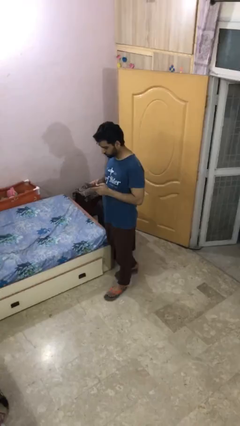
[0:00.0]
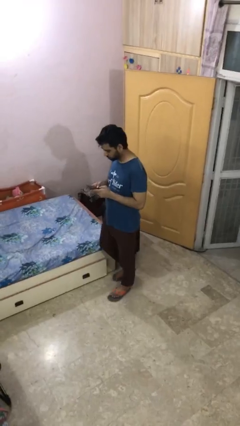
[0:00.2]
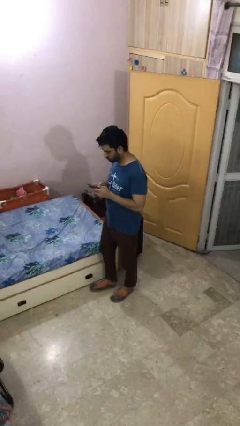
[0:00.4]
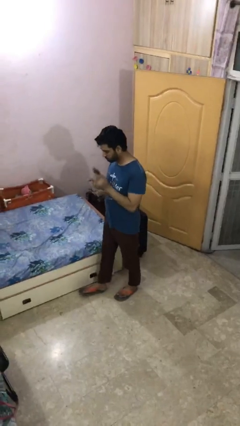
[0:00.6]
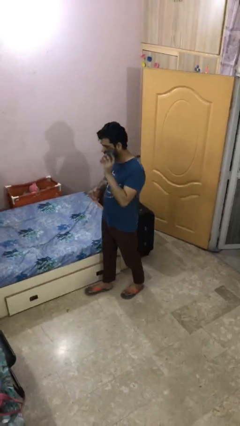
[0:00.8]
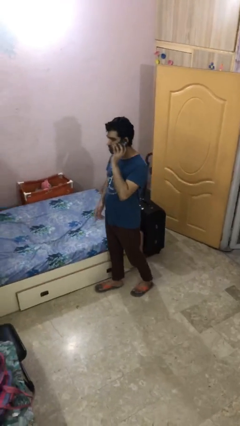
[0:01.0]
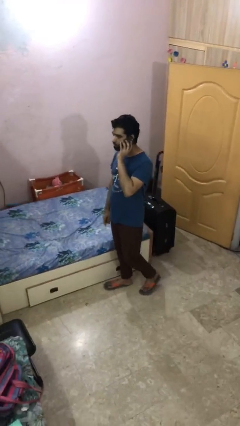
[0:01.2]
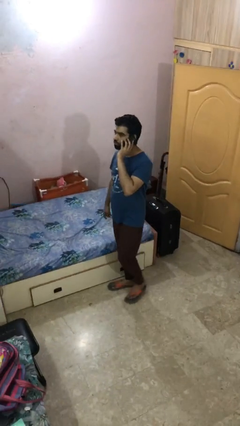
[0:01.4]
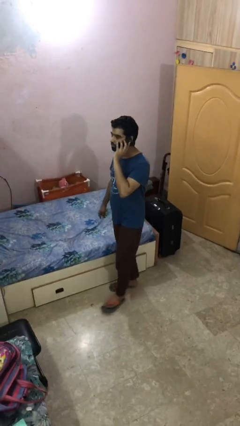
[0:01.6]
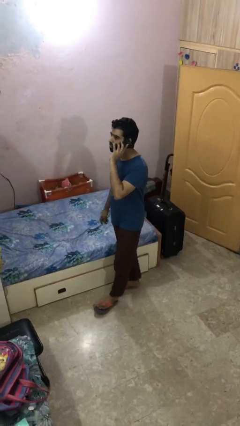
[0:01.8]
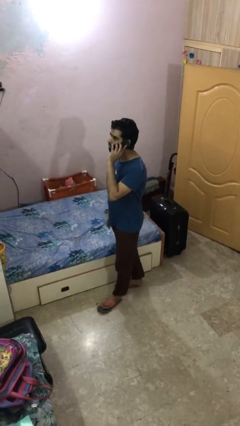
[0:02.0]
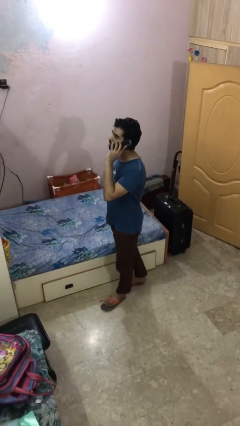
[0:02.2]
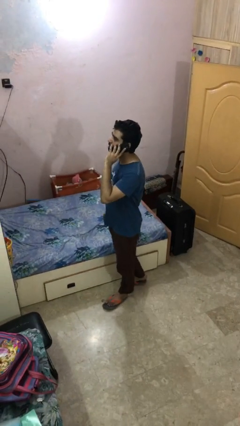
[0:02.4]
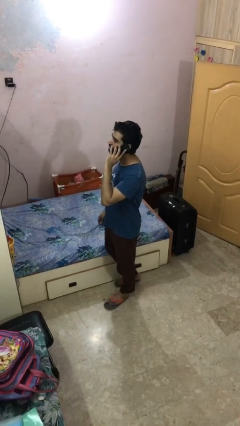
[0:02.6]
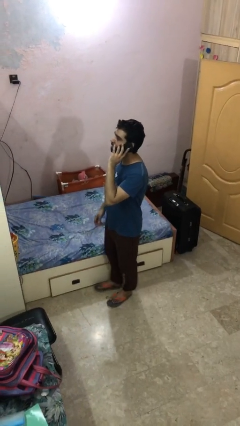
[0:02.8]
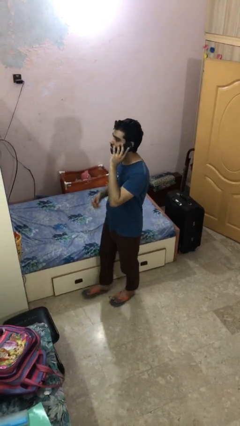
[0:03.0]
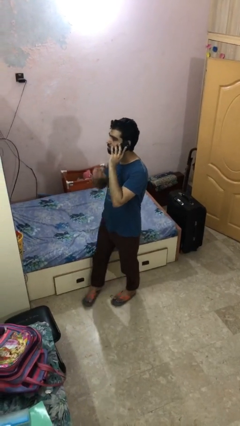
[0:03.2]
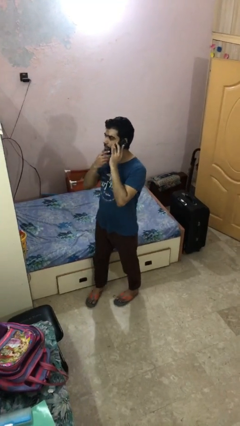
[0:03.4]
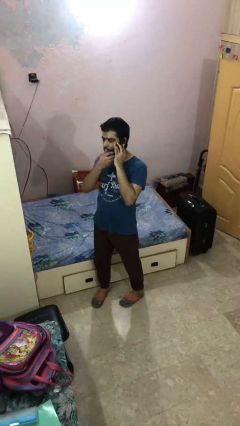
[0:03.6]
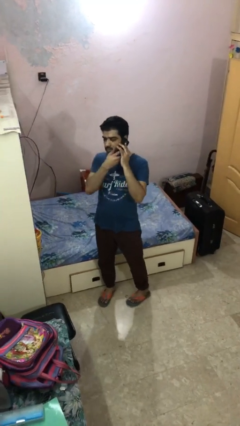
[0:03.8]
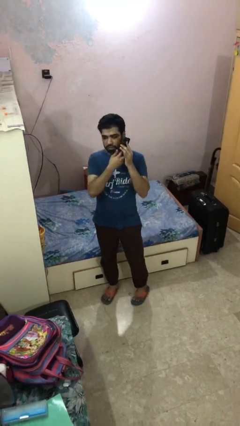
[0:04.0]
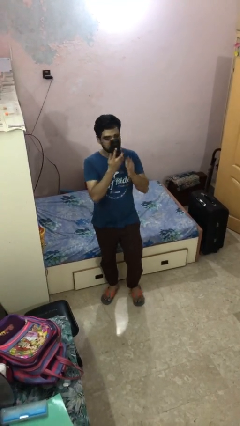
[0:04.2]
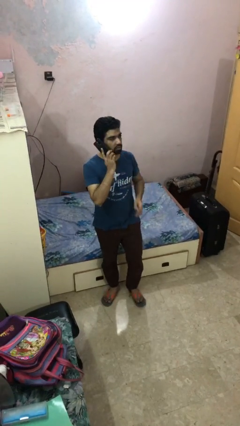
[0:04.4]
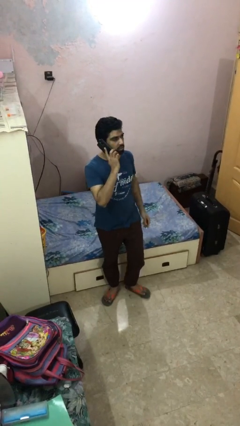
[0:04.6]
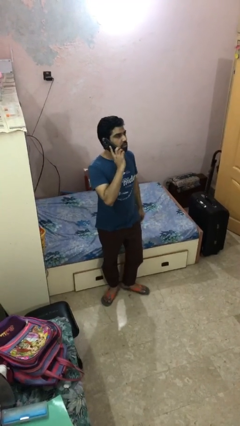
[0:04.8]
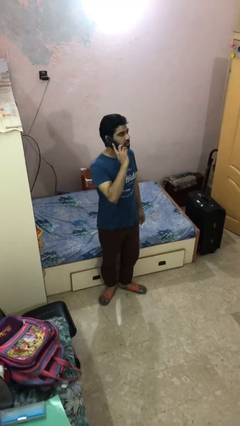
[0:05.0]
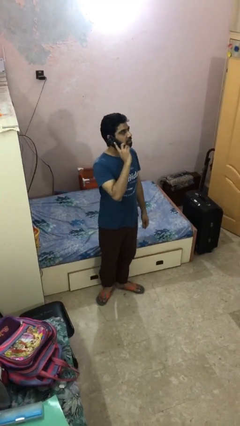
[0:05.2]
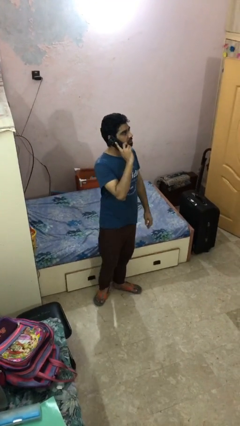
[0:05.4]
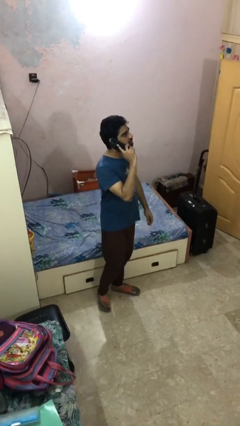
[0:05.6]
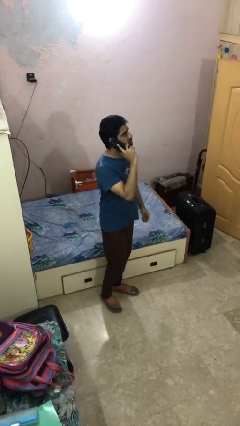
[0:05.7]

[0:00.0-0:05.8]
person talks on phone

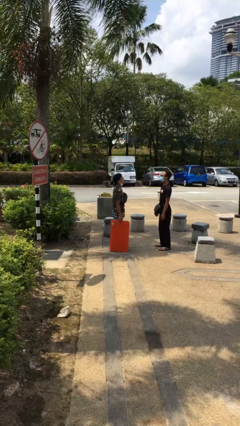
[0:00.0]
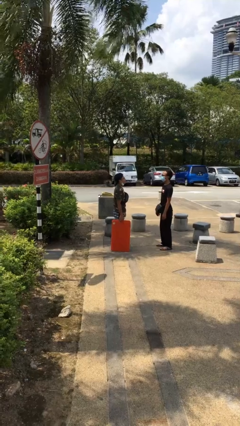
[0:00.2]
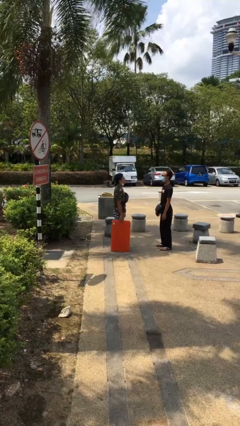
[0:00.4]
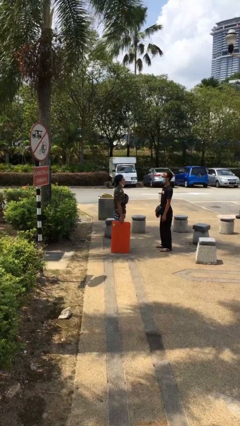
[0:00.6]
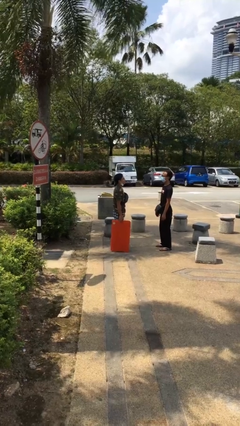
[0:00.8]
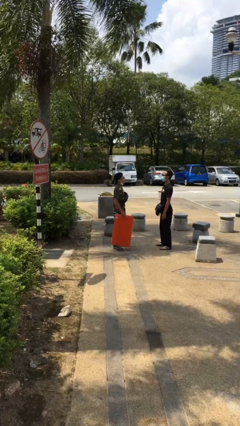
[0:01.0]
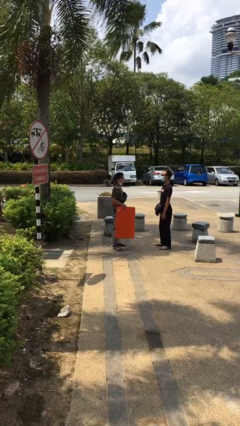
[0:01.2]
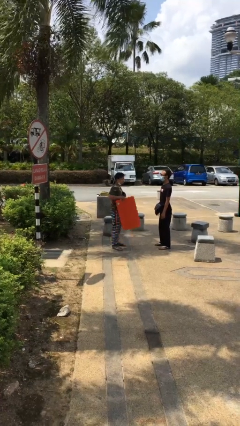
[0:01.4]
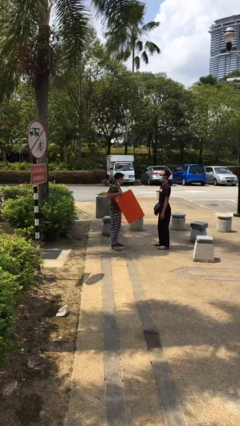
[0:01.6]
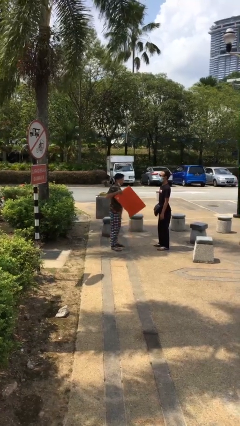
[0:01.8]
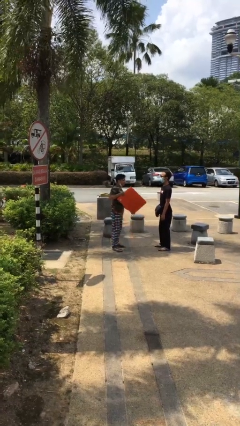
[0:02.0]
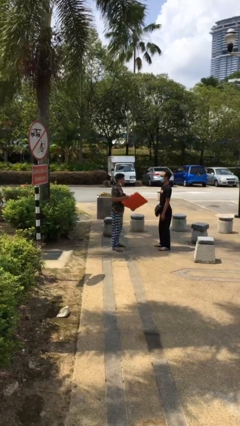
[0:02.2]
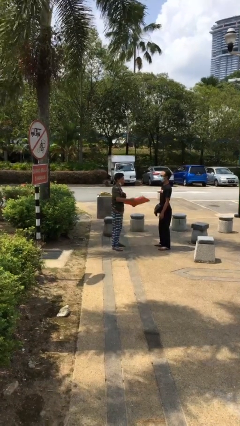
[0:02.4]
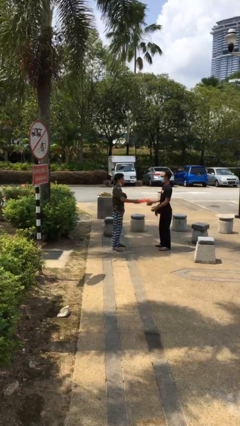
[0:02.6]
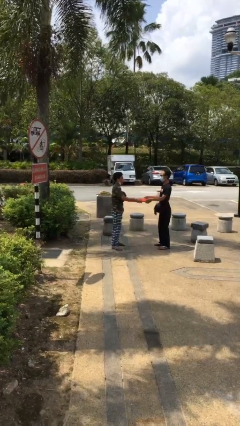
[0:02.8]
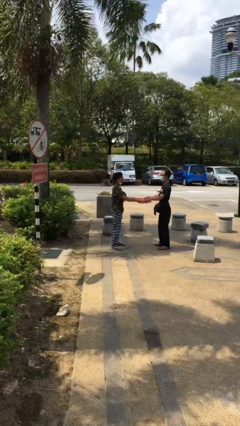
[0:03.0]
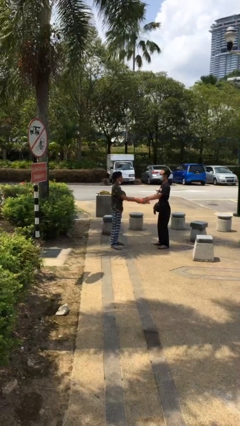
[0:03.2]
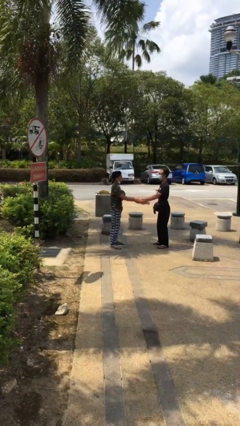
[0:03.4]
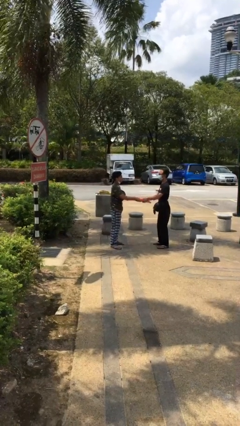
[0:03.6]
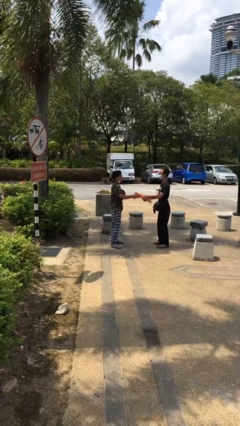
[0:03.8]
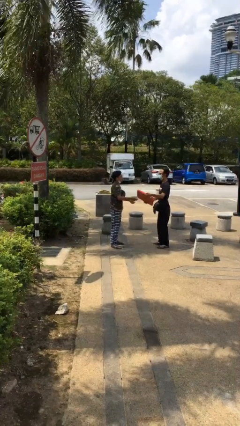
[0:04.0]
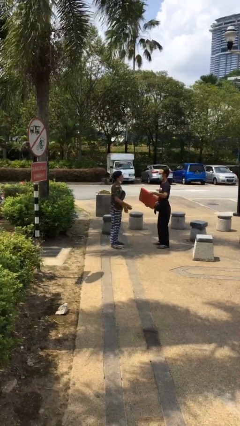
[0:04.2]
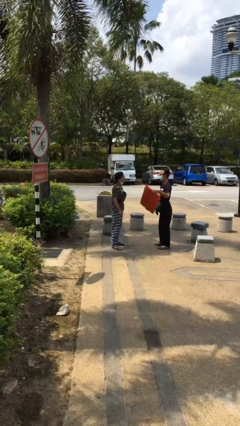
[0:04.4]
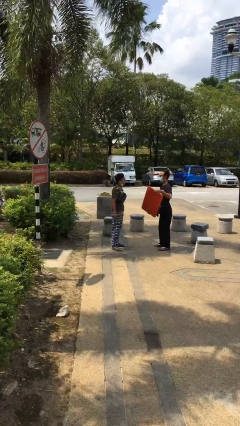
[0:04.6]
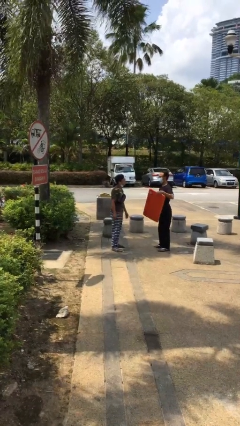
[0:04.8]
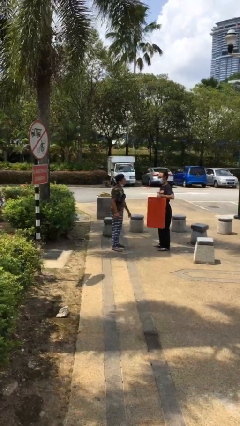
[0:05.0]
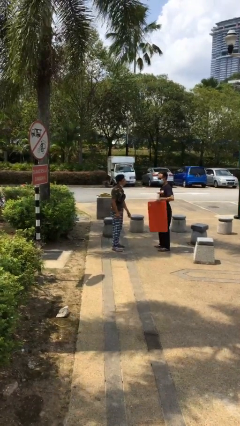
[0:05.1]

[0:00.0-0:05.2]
person transfers object to person

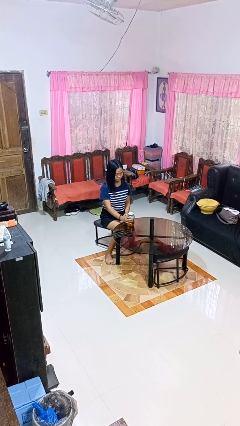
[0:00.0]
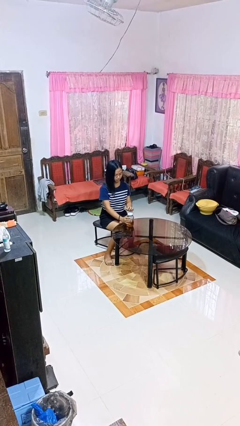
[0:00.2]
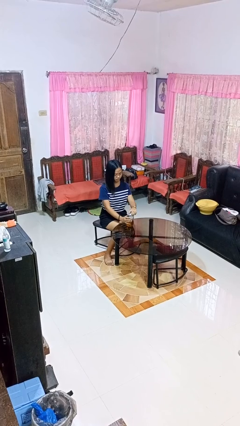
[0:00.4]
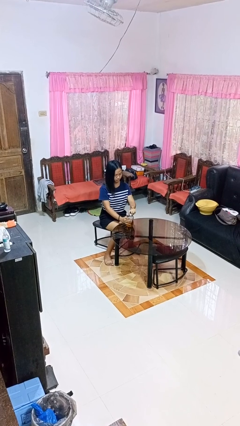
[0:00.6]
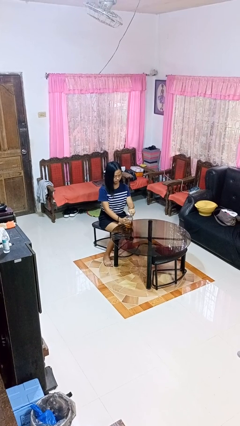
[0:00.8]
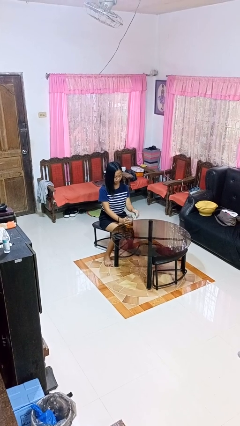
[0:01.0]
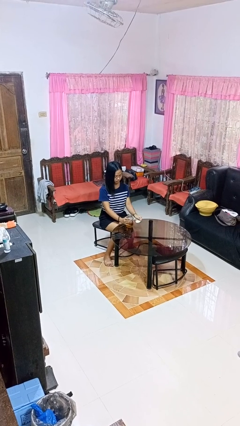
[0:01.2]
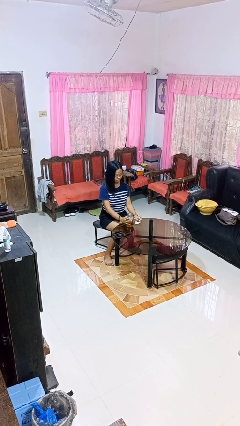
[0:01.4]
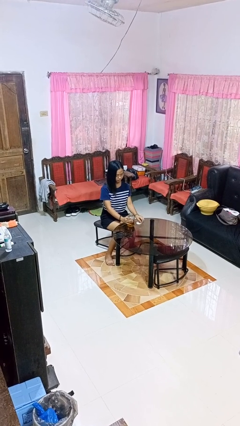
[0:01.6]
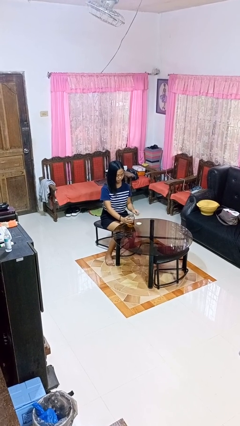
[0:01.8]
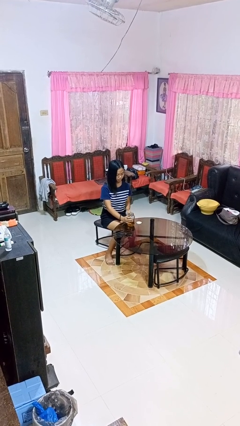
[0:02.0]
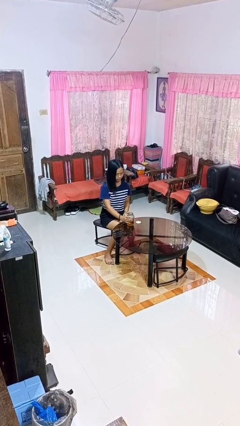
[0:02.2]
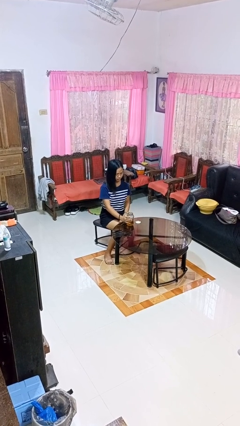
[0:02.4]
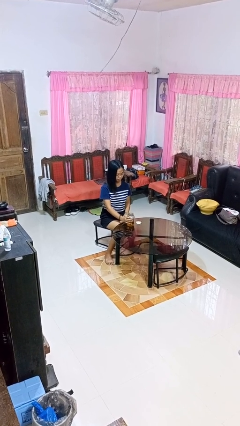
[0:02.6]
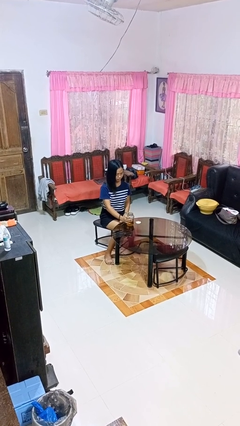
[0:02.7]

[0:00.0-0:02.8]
person opens jar

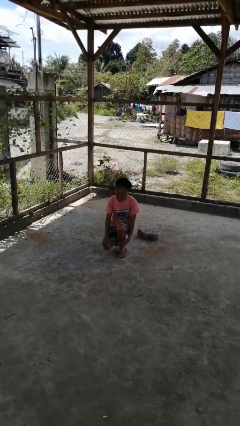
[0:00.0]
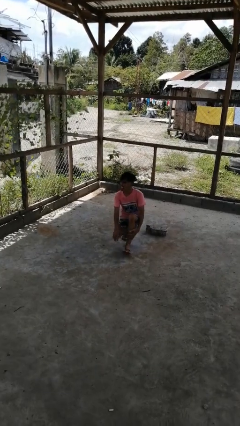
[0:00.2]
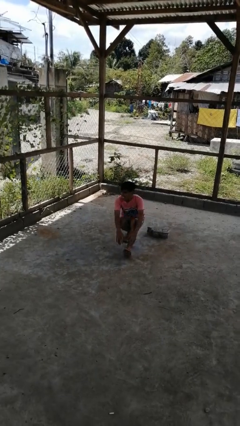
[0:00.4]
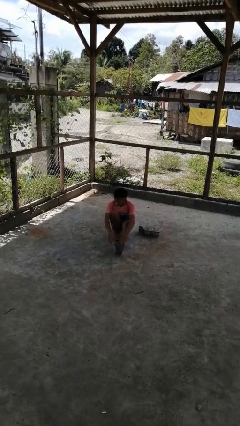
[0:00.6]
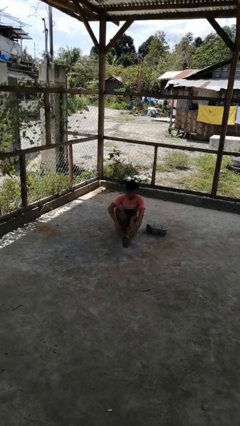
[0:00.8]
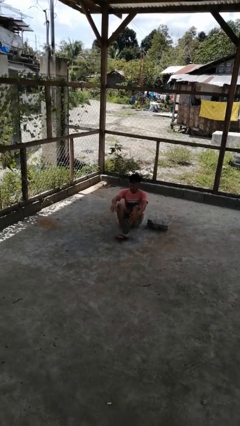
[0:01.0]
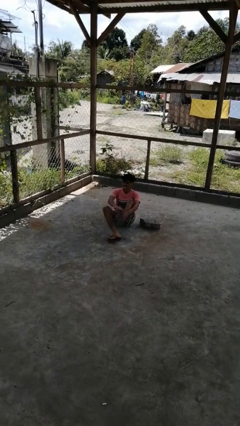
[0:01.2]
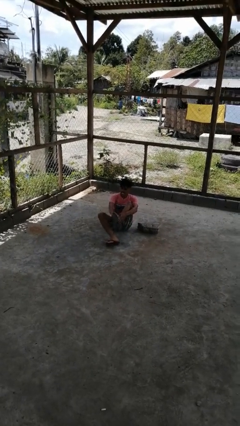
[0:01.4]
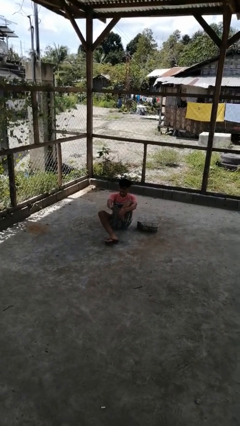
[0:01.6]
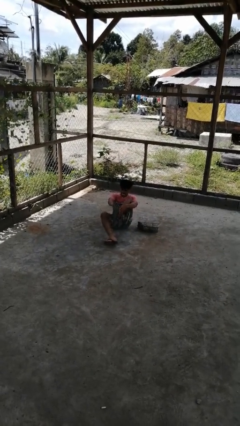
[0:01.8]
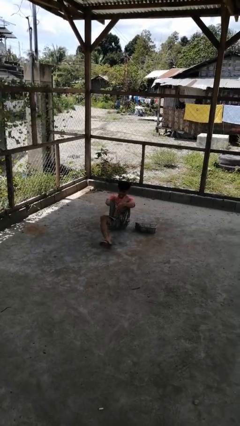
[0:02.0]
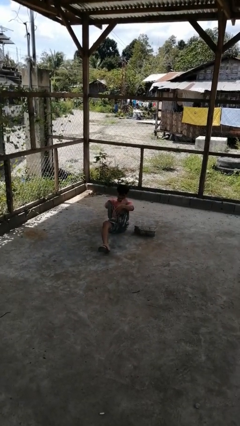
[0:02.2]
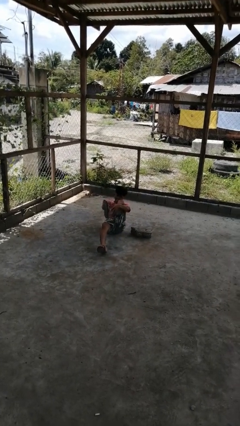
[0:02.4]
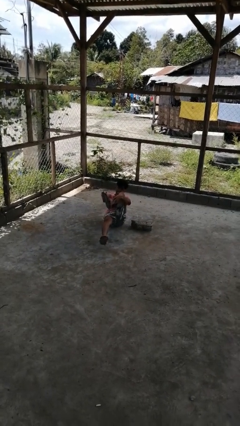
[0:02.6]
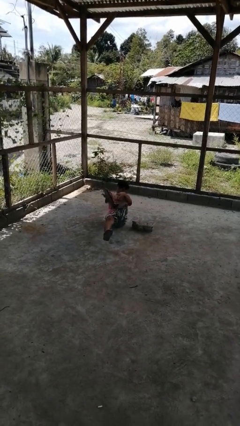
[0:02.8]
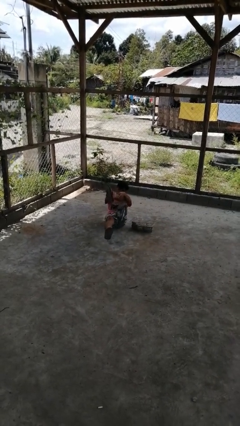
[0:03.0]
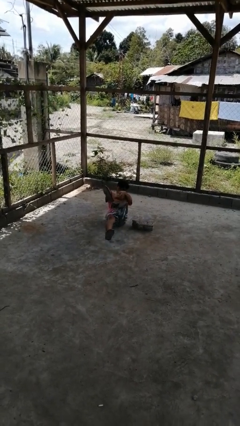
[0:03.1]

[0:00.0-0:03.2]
person lies down on floor

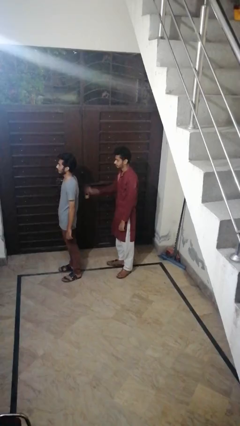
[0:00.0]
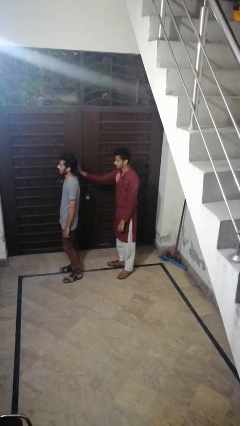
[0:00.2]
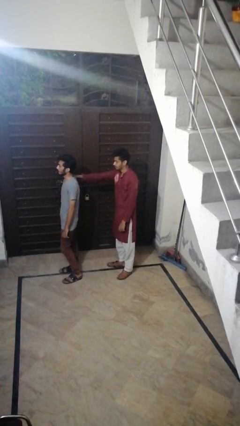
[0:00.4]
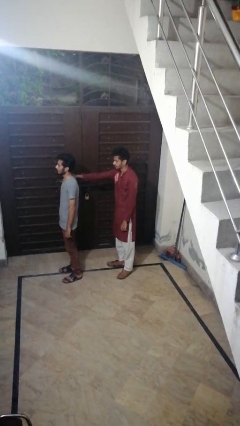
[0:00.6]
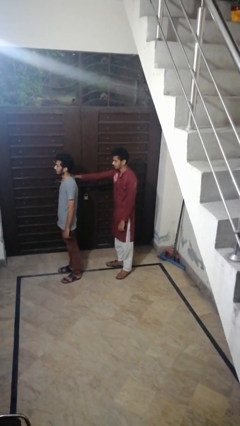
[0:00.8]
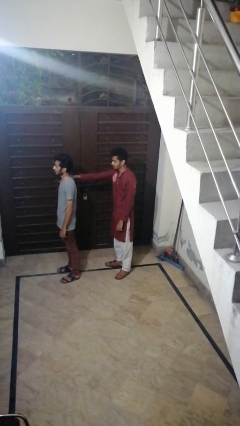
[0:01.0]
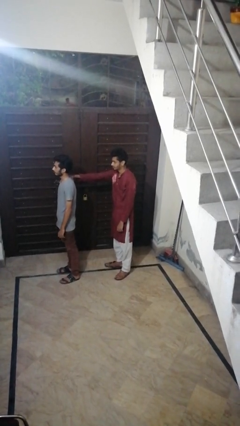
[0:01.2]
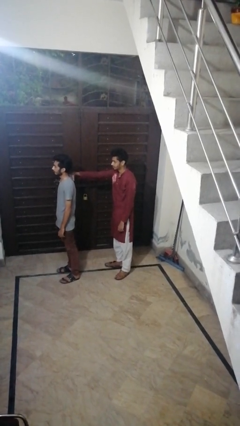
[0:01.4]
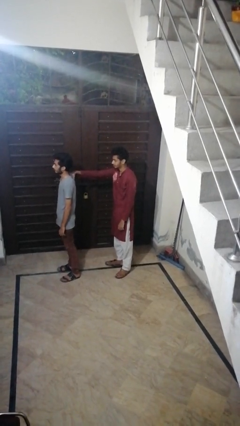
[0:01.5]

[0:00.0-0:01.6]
person grabs person by shoulder
